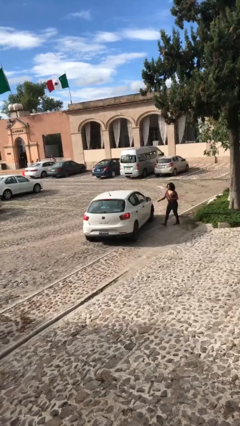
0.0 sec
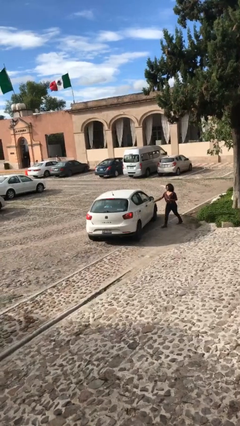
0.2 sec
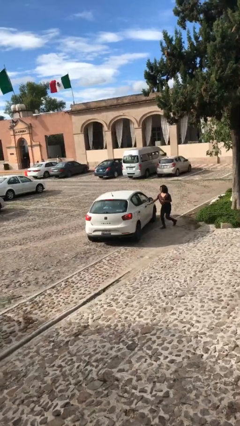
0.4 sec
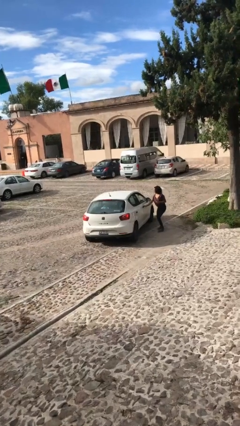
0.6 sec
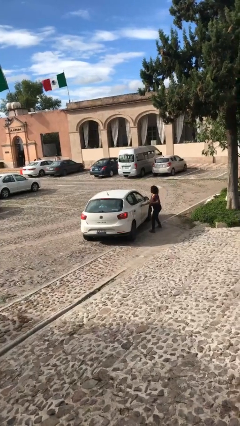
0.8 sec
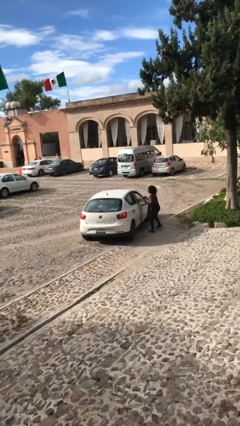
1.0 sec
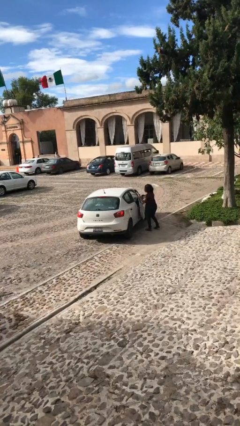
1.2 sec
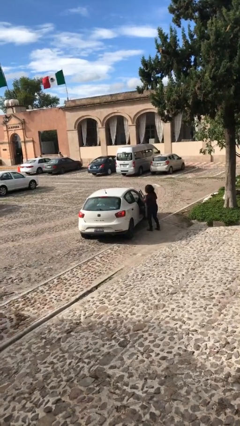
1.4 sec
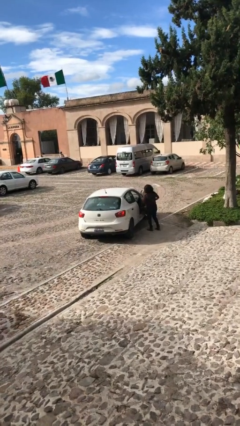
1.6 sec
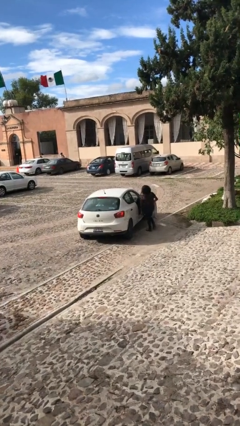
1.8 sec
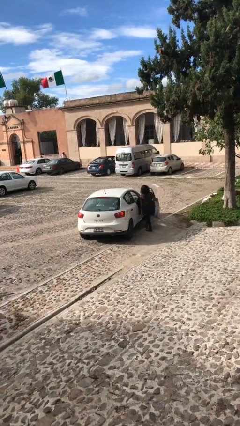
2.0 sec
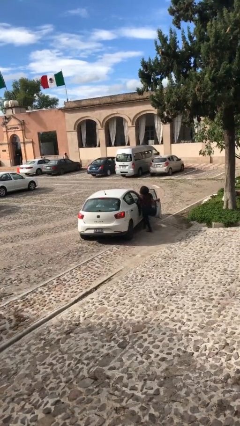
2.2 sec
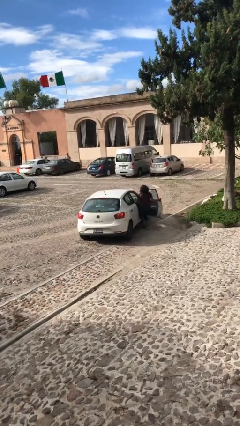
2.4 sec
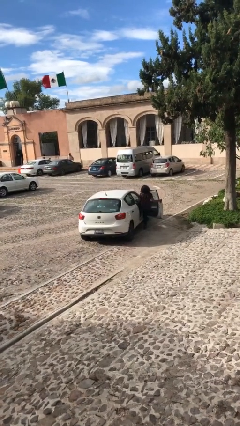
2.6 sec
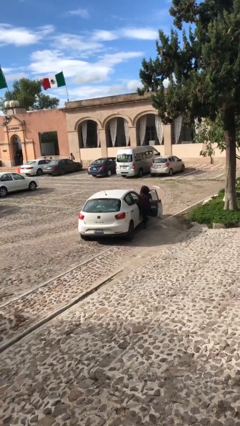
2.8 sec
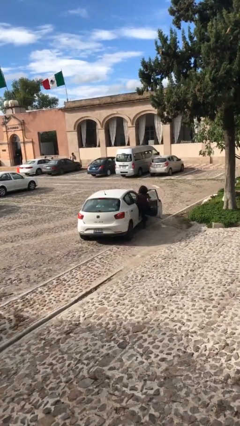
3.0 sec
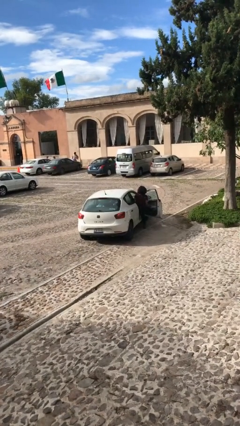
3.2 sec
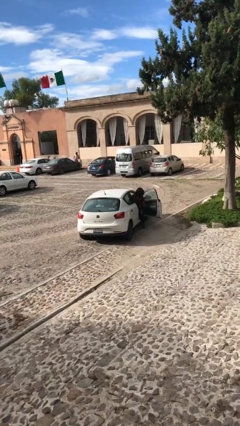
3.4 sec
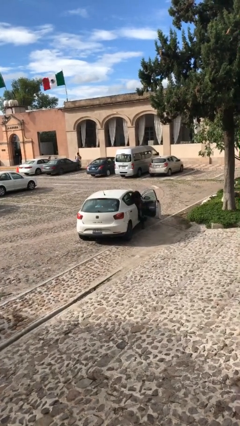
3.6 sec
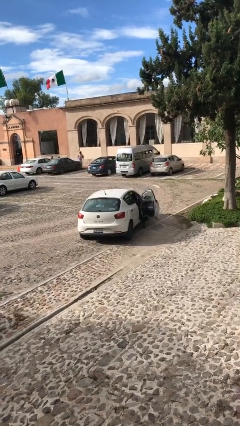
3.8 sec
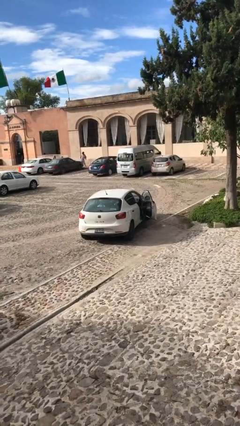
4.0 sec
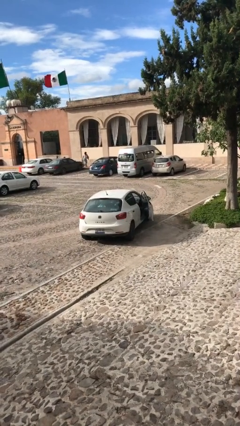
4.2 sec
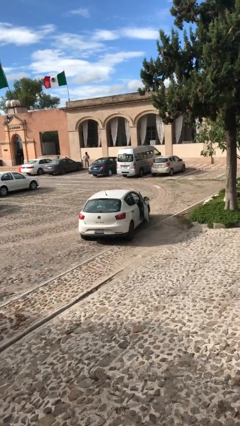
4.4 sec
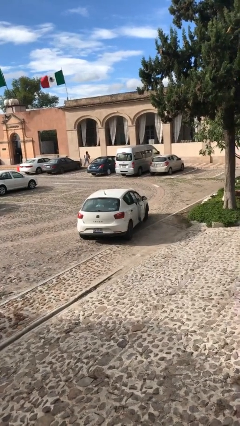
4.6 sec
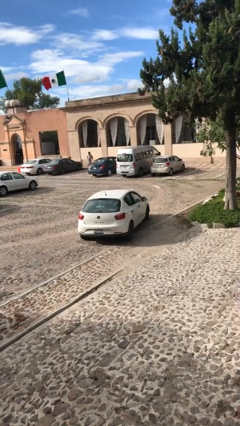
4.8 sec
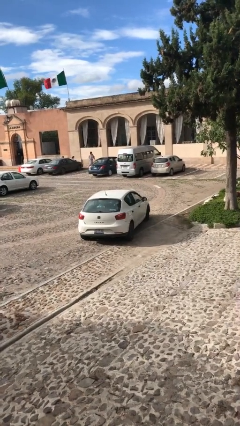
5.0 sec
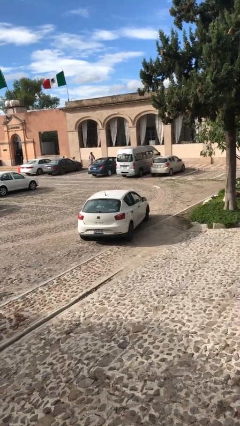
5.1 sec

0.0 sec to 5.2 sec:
car picks up person

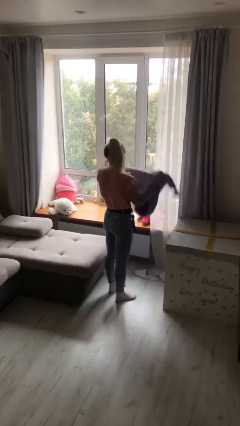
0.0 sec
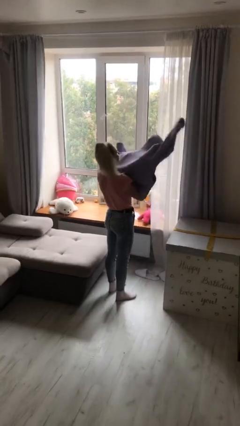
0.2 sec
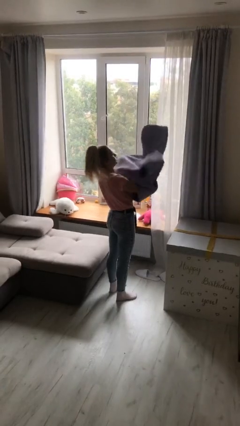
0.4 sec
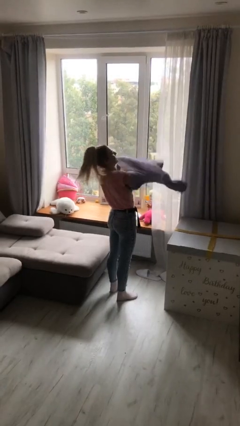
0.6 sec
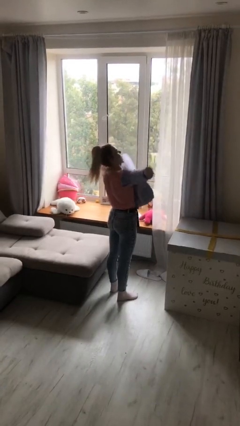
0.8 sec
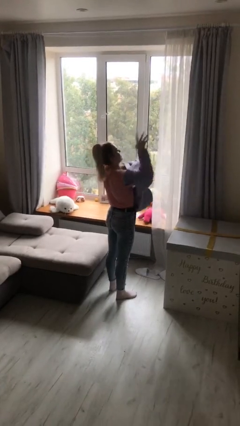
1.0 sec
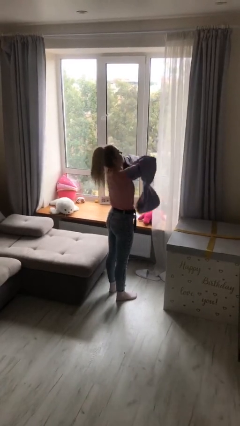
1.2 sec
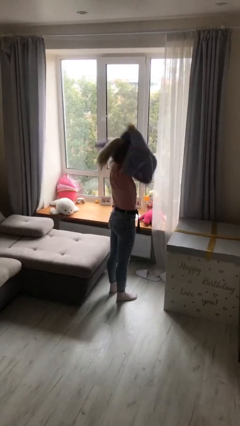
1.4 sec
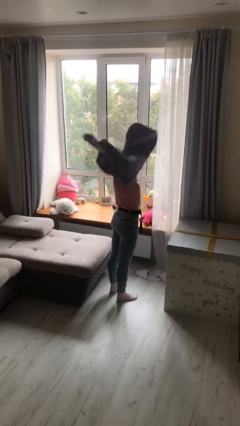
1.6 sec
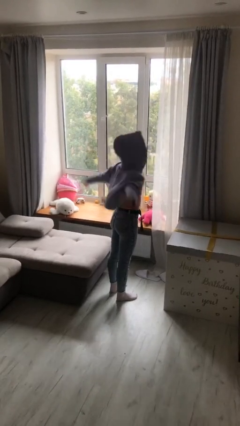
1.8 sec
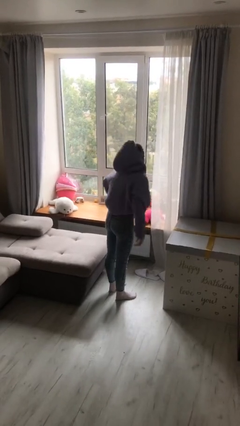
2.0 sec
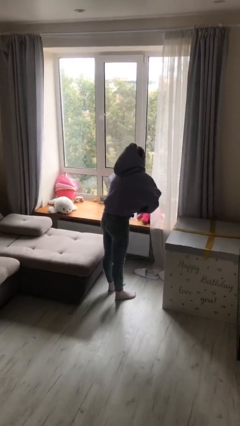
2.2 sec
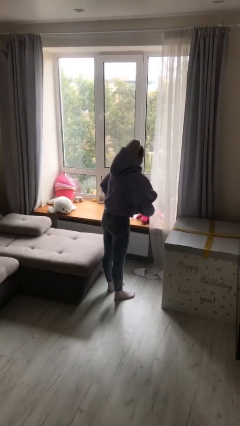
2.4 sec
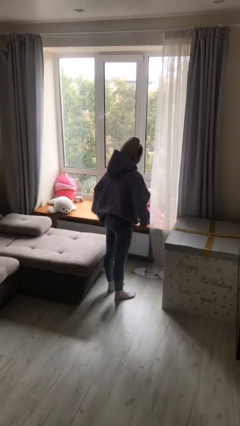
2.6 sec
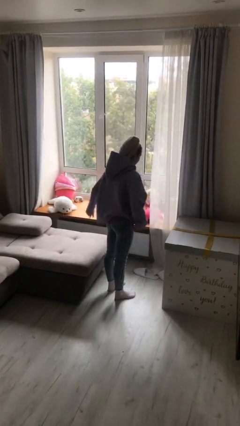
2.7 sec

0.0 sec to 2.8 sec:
person puts on hoodie

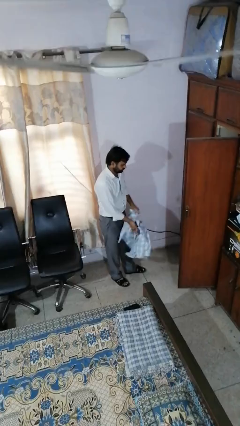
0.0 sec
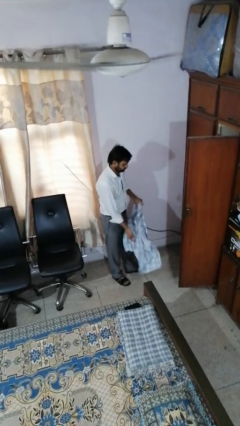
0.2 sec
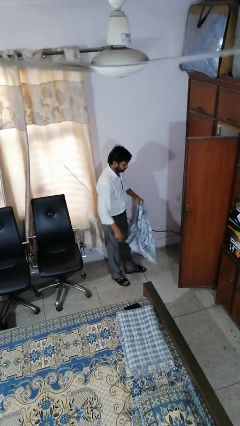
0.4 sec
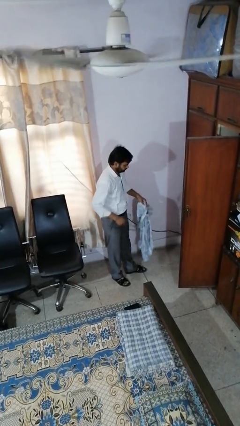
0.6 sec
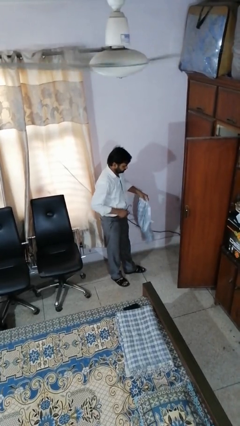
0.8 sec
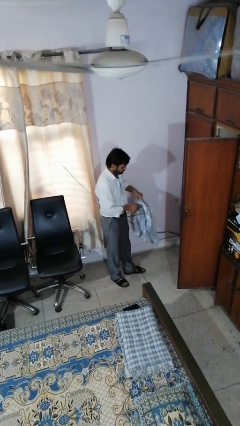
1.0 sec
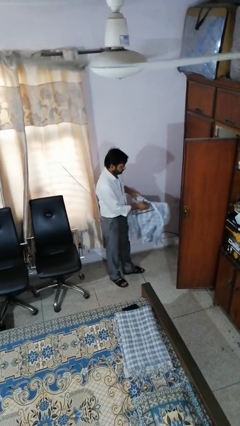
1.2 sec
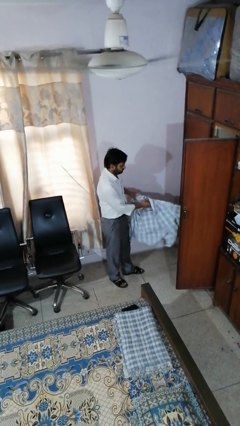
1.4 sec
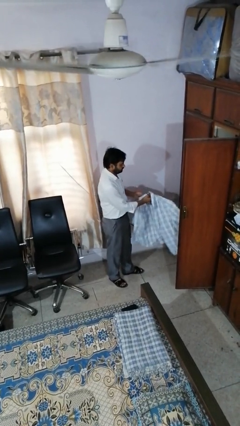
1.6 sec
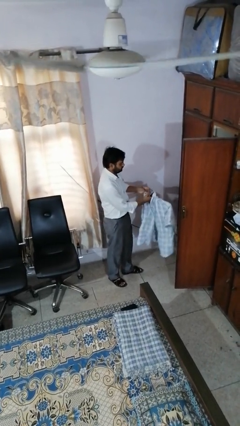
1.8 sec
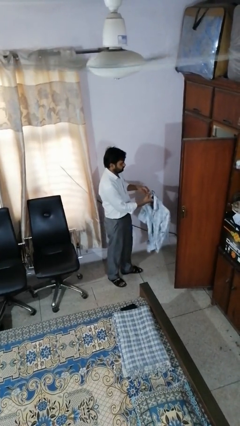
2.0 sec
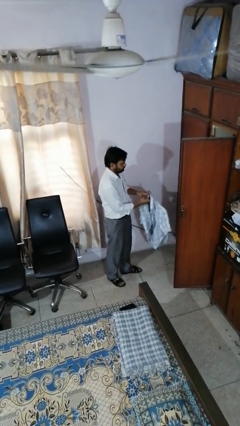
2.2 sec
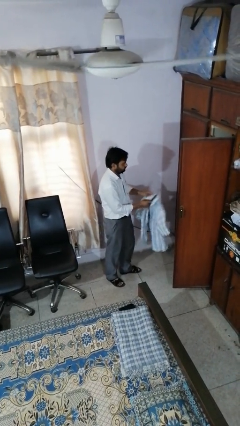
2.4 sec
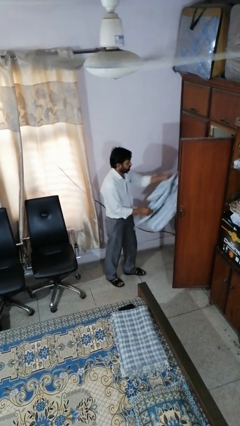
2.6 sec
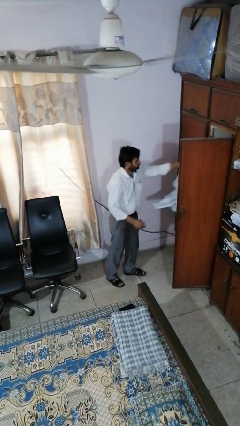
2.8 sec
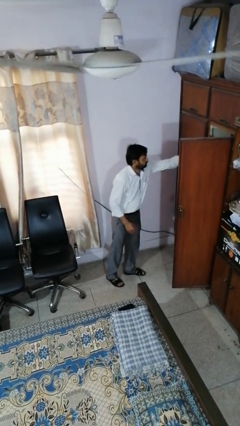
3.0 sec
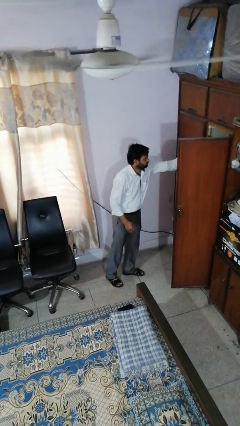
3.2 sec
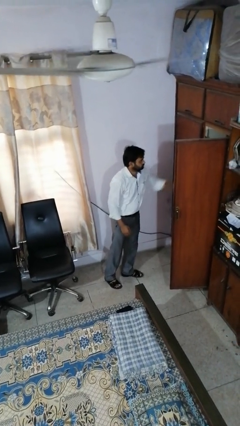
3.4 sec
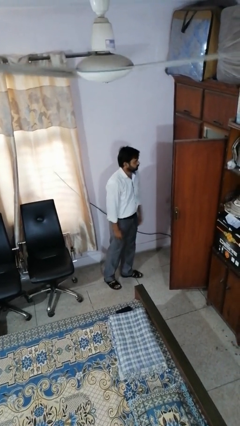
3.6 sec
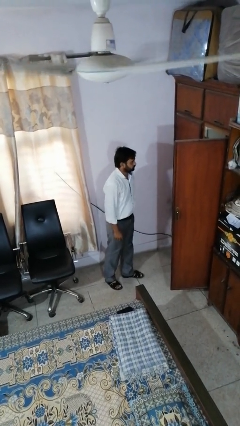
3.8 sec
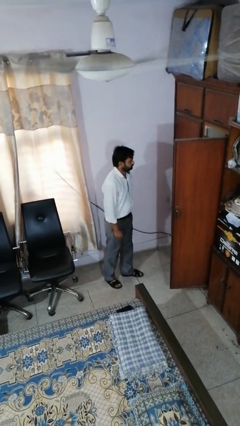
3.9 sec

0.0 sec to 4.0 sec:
person puts clothes into closet

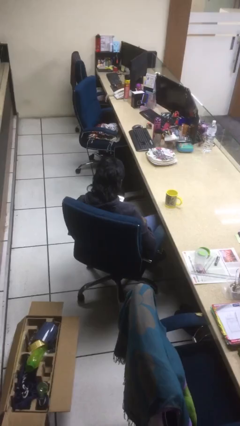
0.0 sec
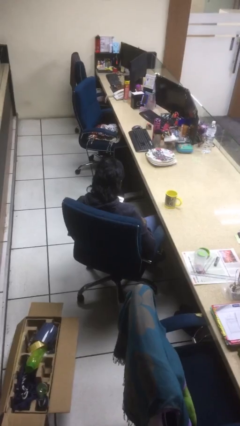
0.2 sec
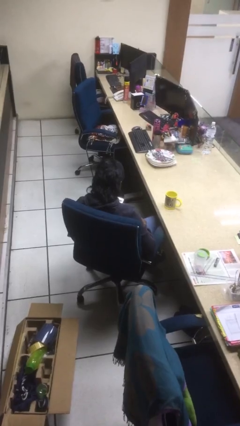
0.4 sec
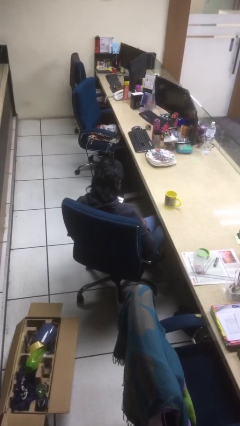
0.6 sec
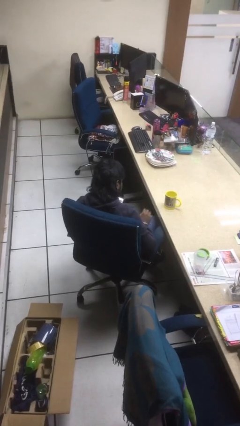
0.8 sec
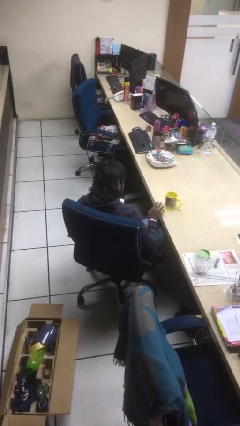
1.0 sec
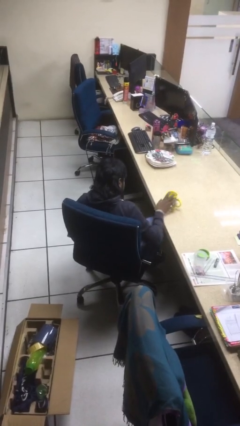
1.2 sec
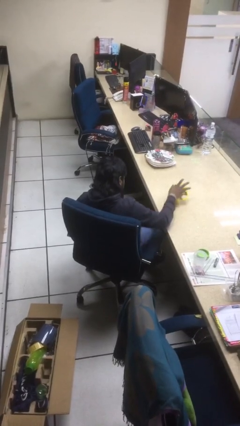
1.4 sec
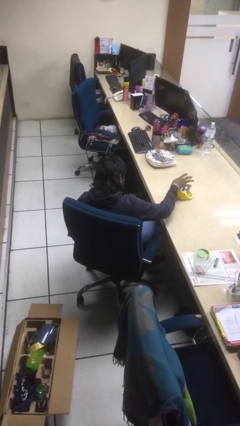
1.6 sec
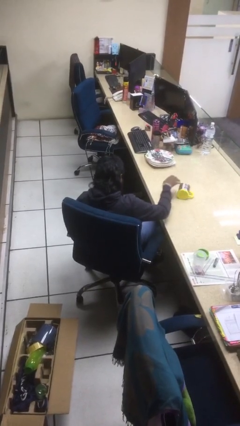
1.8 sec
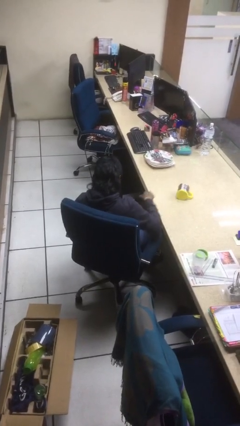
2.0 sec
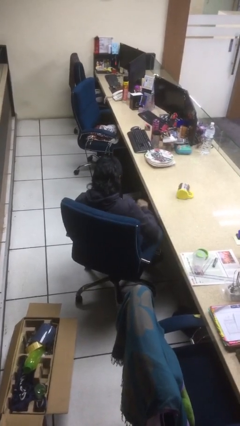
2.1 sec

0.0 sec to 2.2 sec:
person knocks over glass

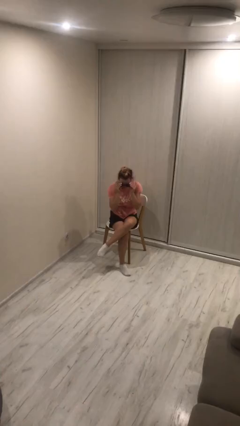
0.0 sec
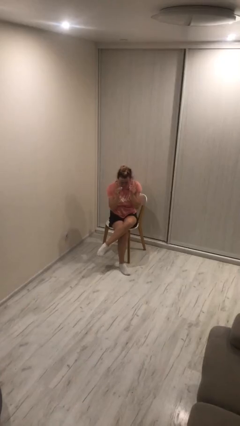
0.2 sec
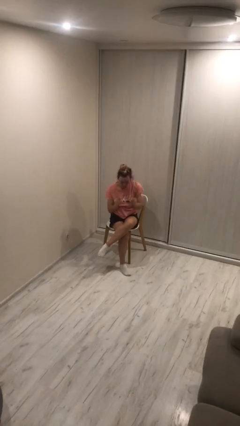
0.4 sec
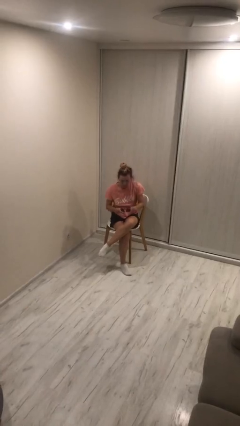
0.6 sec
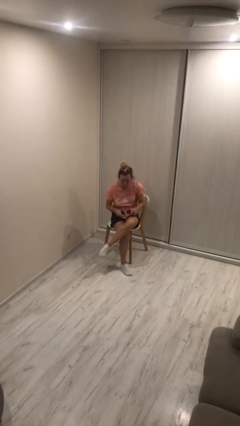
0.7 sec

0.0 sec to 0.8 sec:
person takes off sunglasses

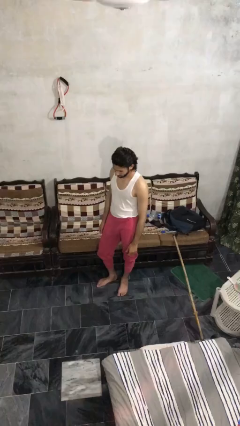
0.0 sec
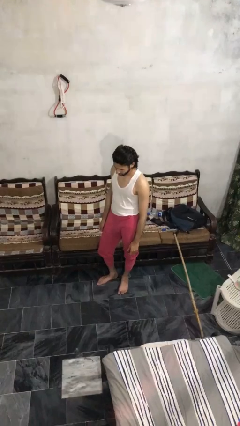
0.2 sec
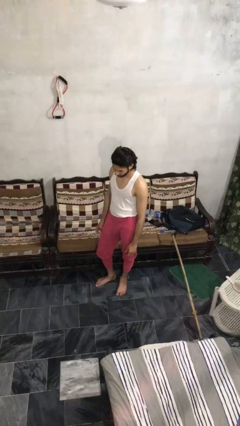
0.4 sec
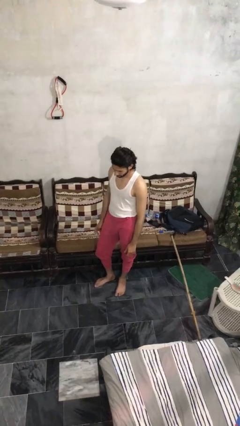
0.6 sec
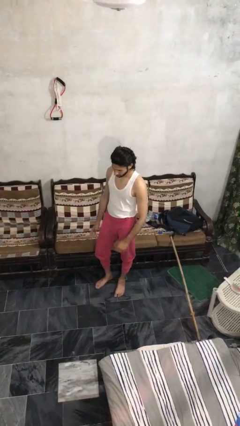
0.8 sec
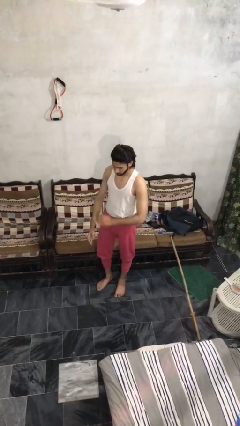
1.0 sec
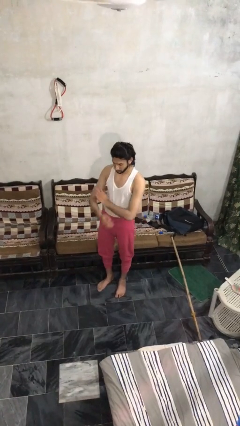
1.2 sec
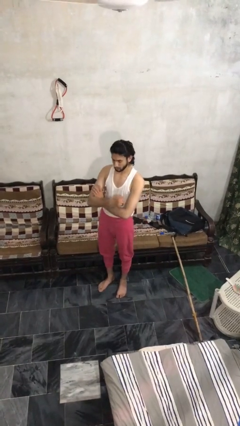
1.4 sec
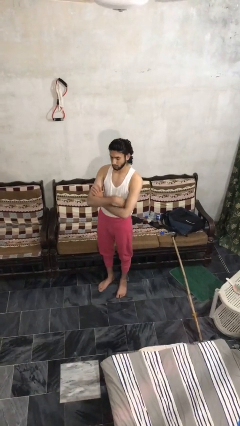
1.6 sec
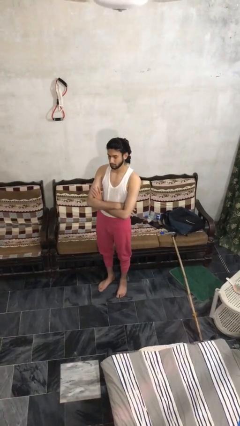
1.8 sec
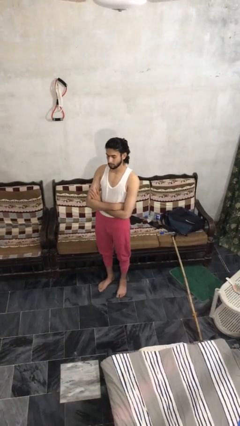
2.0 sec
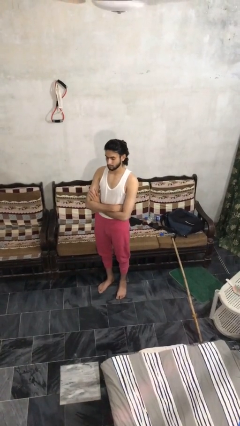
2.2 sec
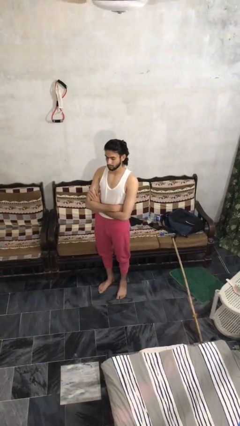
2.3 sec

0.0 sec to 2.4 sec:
person crosses arms

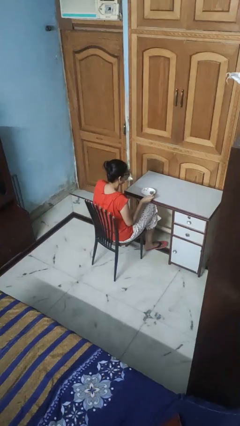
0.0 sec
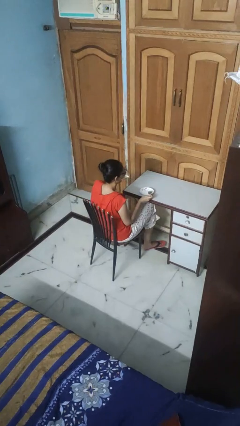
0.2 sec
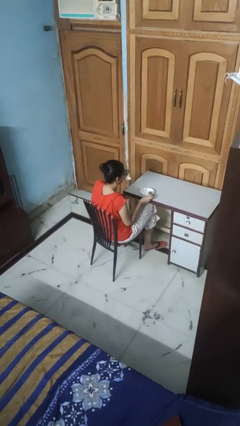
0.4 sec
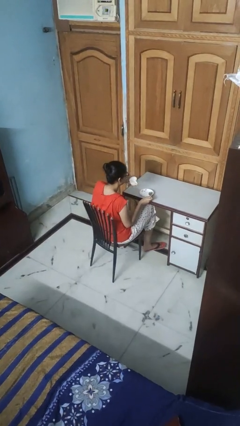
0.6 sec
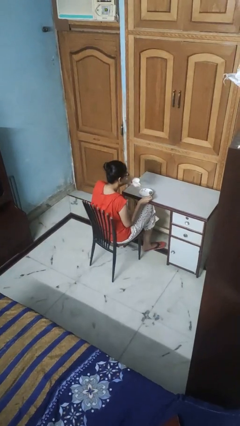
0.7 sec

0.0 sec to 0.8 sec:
person drinks from mug
